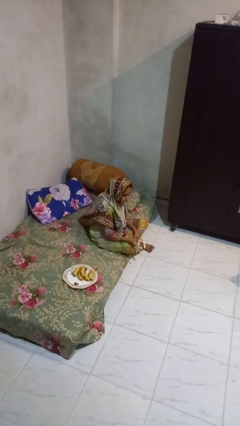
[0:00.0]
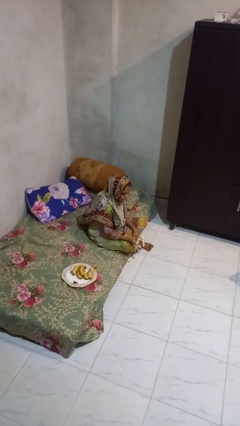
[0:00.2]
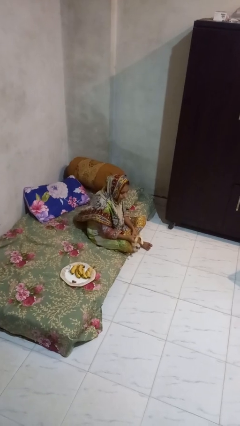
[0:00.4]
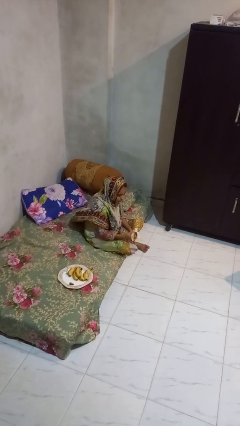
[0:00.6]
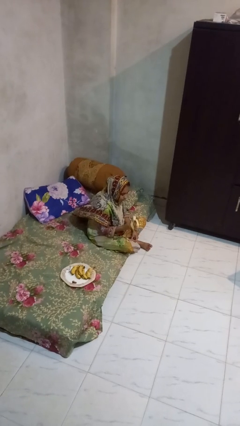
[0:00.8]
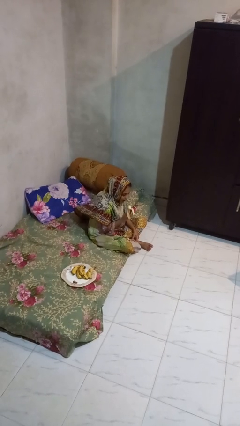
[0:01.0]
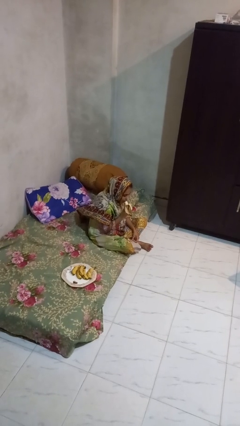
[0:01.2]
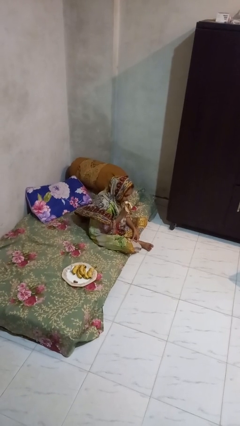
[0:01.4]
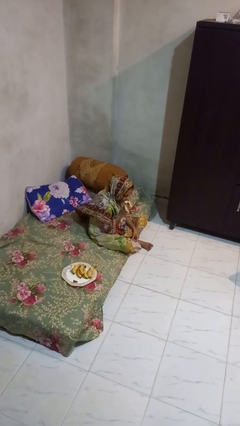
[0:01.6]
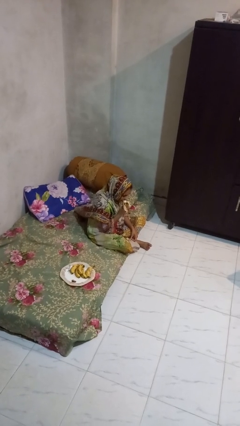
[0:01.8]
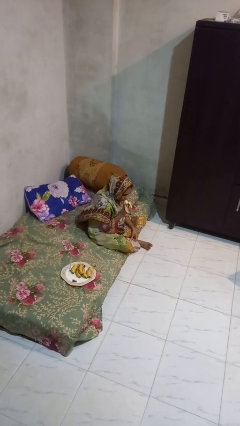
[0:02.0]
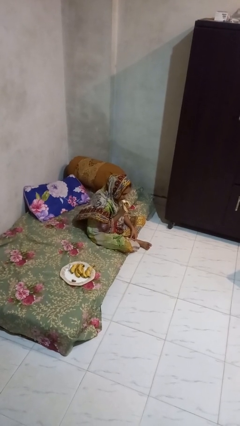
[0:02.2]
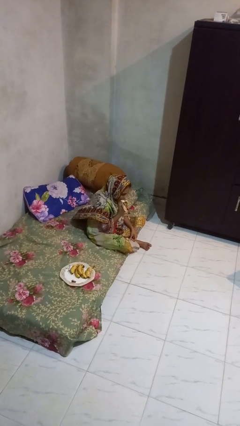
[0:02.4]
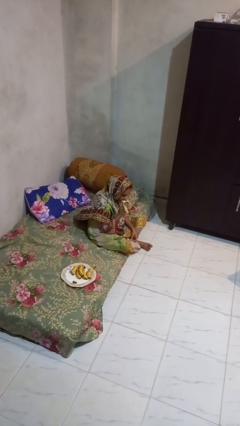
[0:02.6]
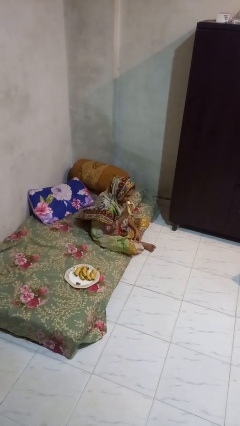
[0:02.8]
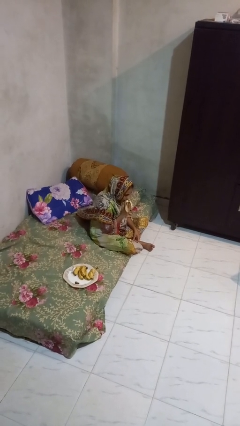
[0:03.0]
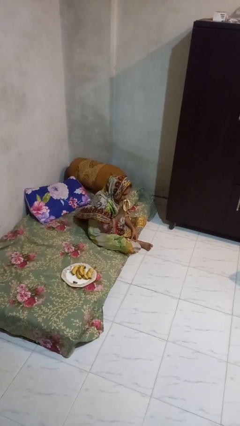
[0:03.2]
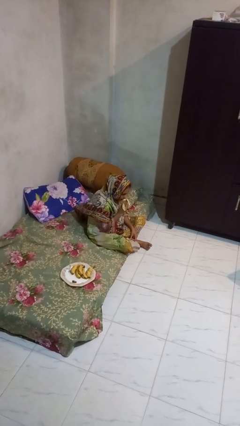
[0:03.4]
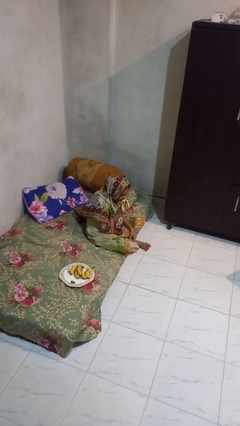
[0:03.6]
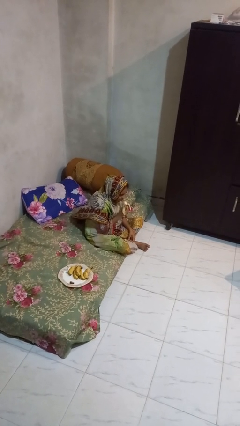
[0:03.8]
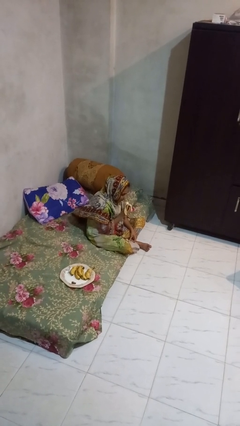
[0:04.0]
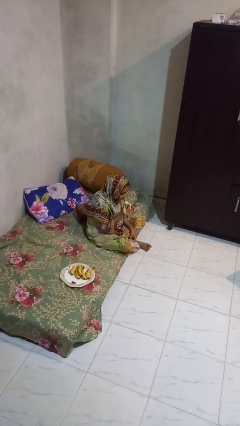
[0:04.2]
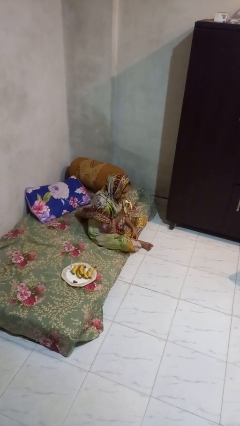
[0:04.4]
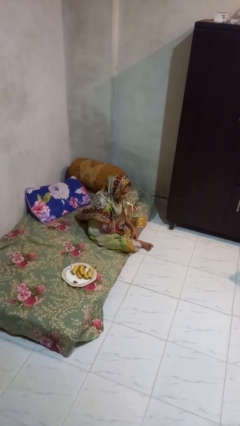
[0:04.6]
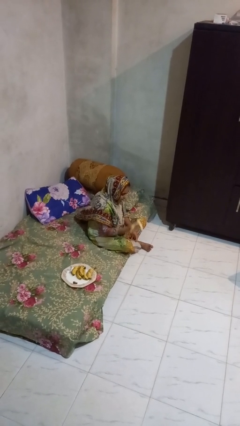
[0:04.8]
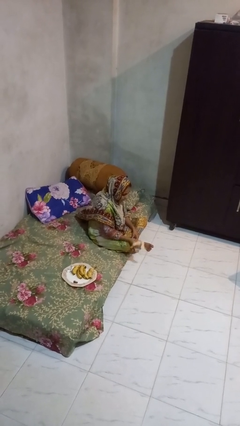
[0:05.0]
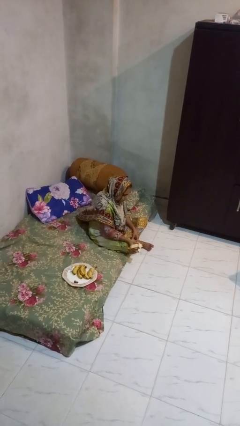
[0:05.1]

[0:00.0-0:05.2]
person eats banana

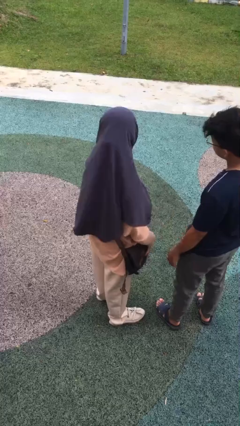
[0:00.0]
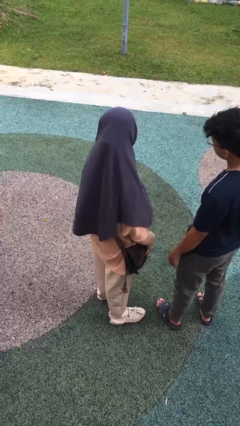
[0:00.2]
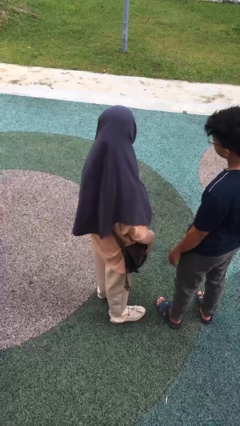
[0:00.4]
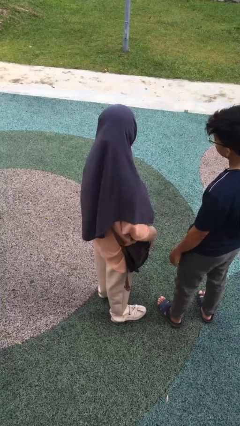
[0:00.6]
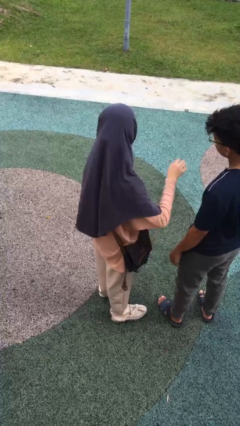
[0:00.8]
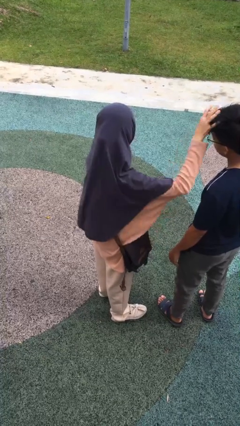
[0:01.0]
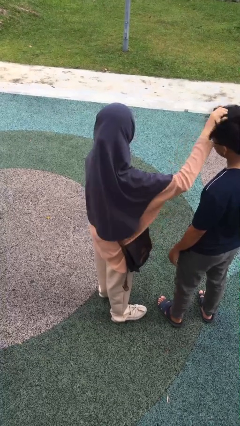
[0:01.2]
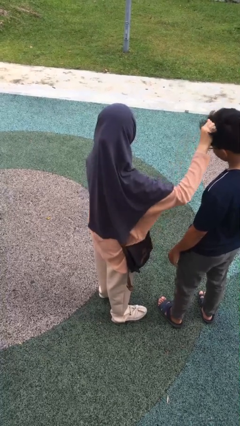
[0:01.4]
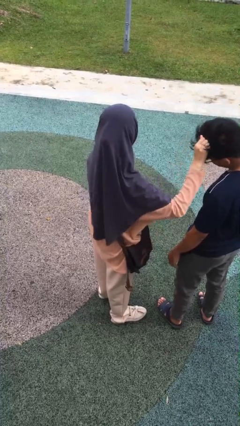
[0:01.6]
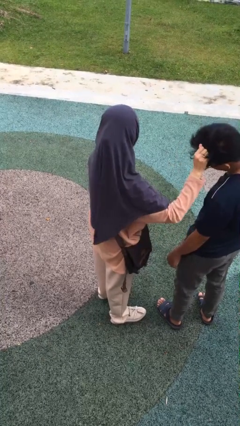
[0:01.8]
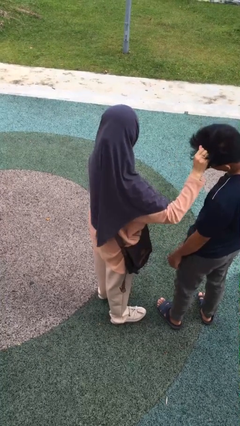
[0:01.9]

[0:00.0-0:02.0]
person grabs person by hair

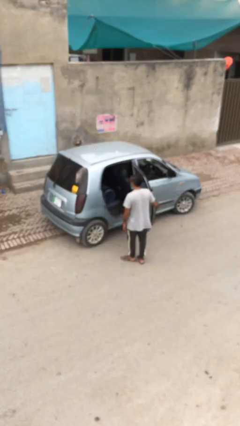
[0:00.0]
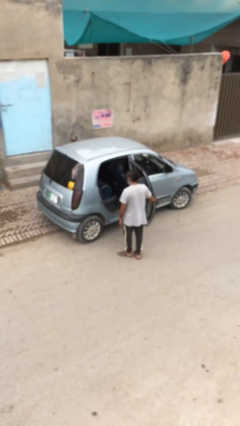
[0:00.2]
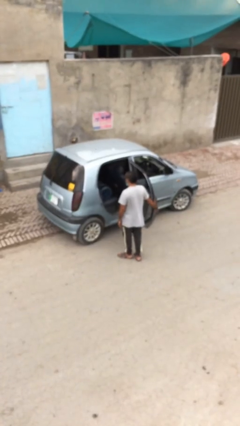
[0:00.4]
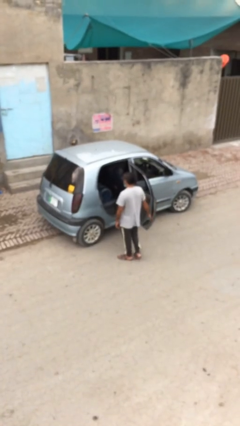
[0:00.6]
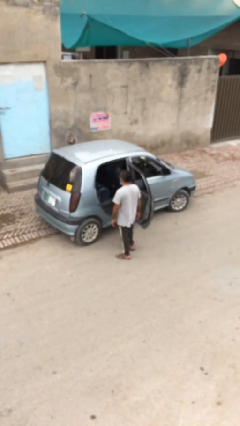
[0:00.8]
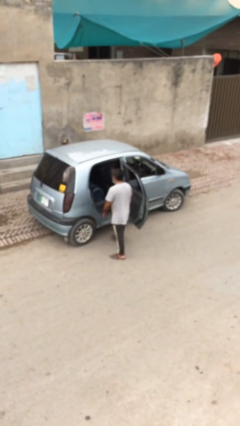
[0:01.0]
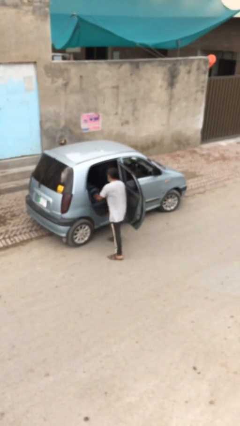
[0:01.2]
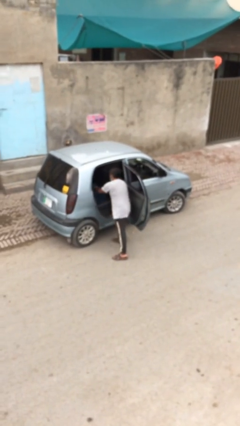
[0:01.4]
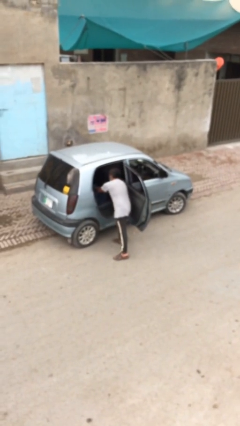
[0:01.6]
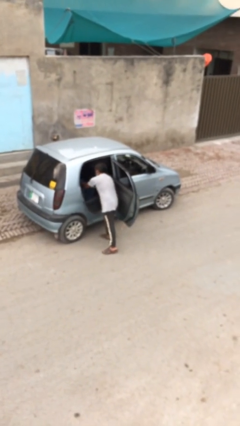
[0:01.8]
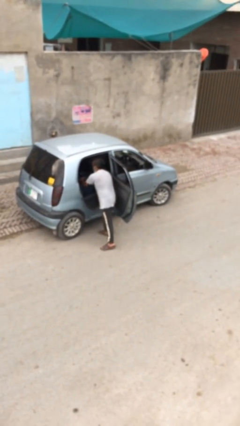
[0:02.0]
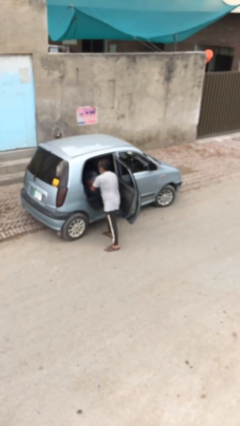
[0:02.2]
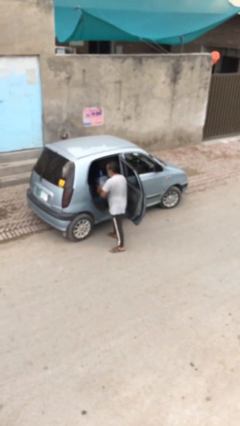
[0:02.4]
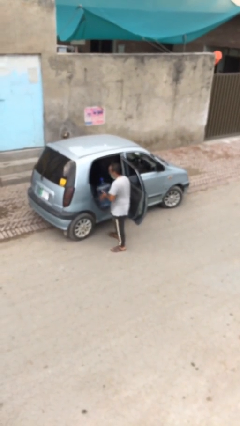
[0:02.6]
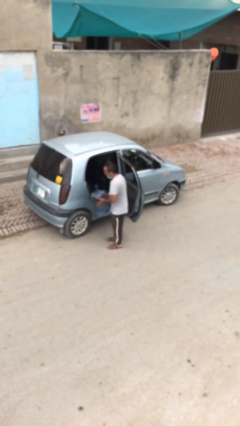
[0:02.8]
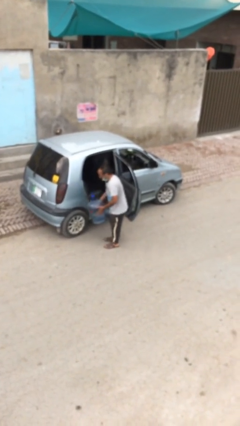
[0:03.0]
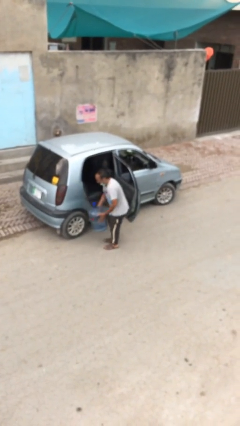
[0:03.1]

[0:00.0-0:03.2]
person unloads car

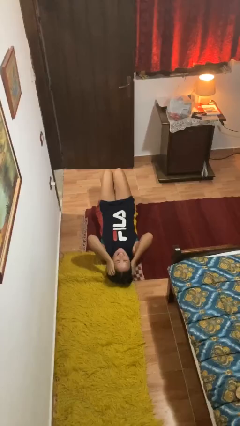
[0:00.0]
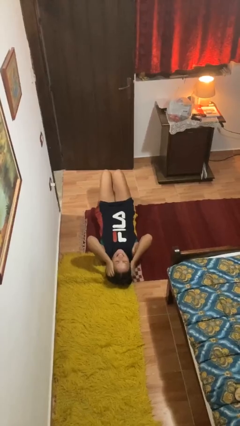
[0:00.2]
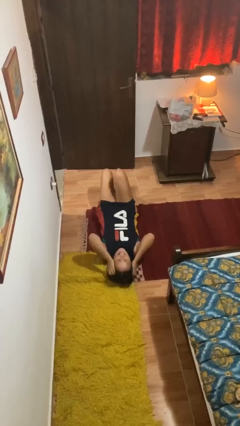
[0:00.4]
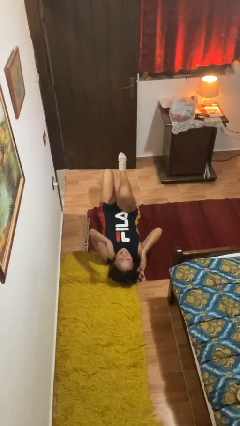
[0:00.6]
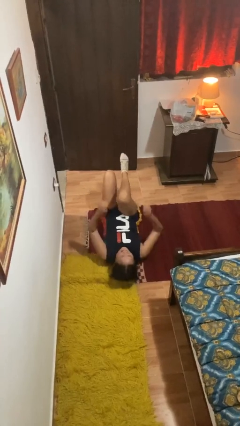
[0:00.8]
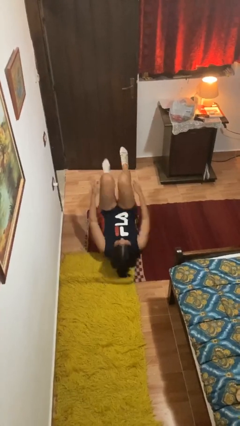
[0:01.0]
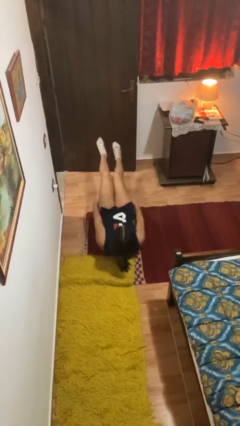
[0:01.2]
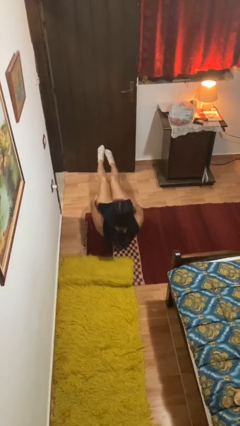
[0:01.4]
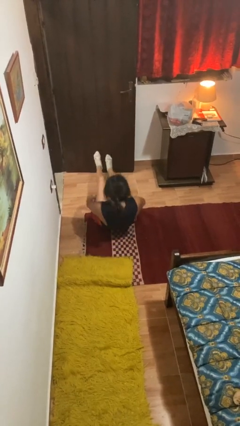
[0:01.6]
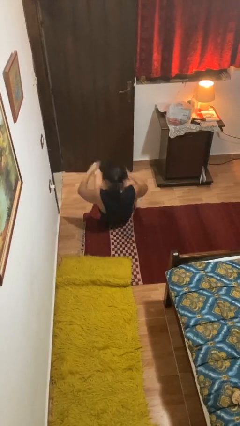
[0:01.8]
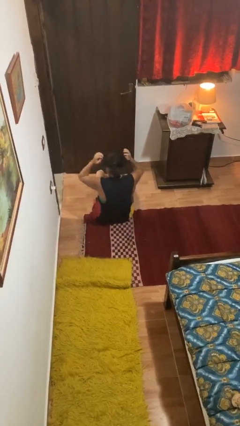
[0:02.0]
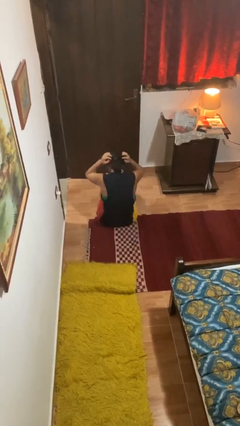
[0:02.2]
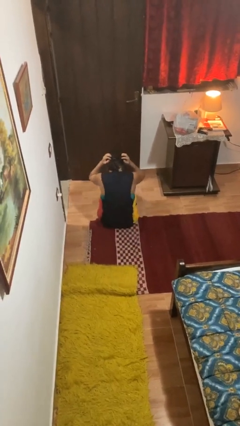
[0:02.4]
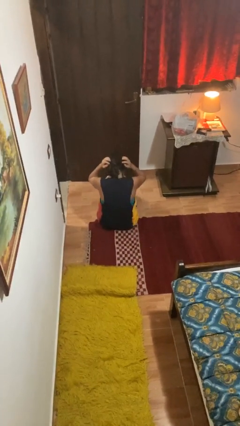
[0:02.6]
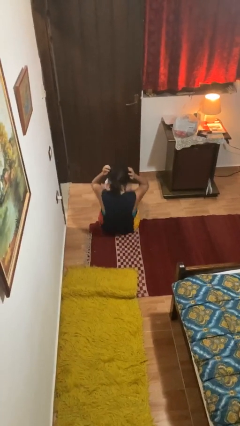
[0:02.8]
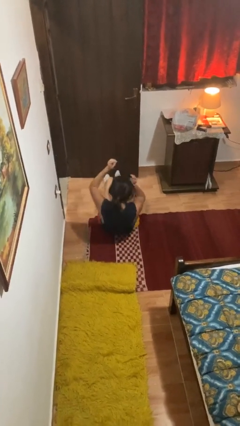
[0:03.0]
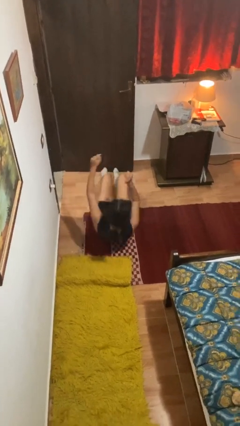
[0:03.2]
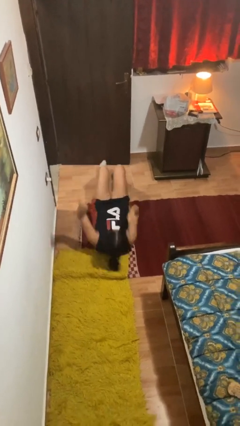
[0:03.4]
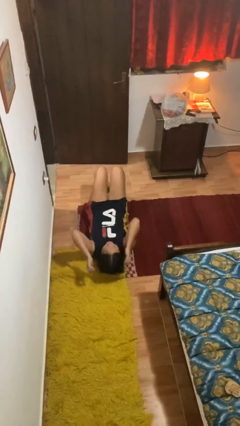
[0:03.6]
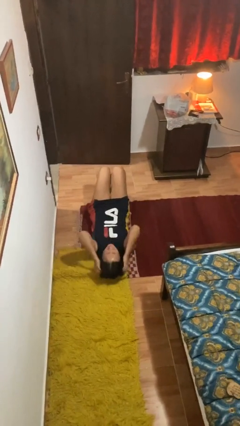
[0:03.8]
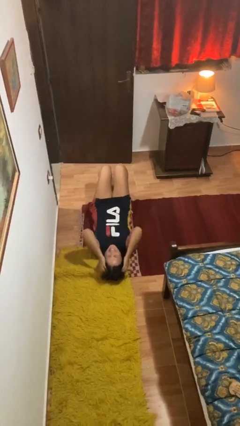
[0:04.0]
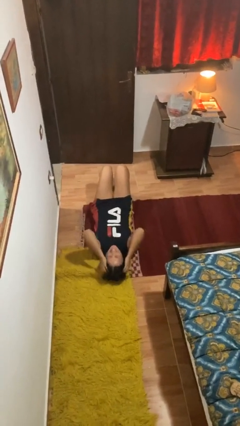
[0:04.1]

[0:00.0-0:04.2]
person exercises with situp

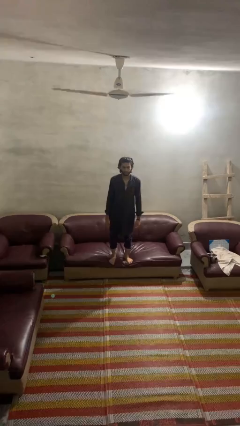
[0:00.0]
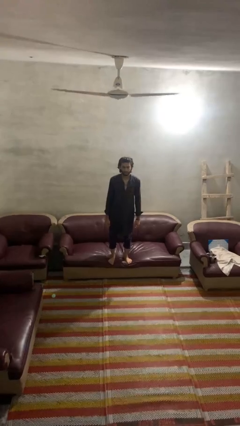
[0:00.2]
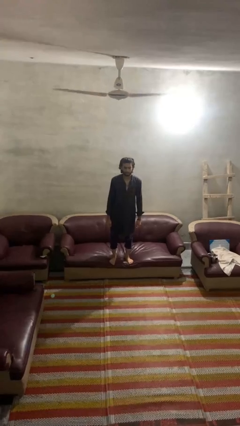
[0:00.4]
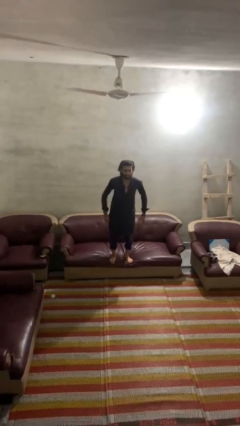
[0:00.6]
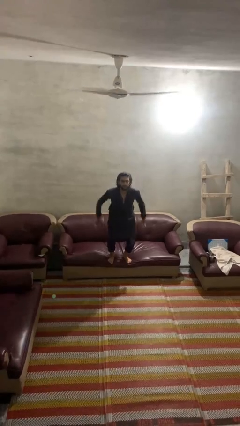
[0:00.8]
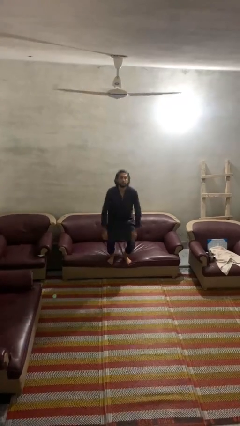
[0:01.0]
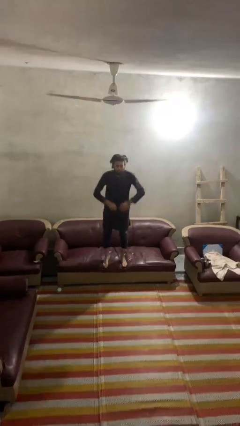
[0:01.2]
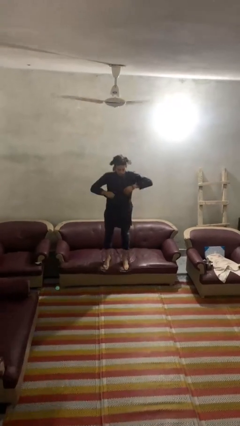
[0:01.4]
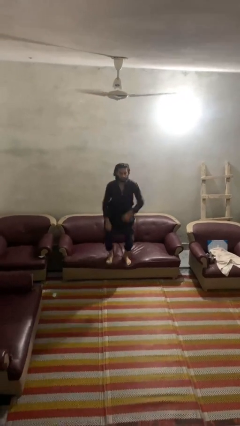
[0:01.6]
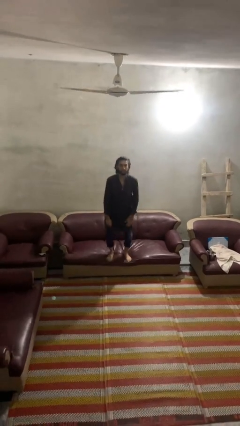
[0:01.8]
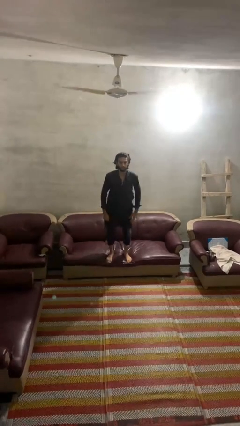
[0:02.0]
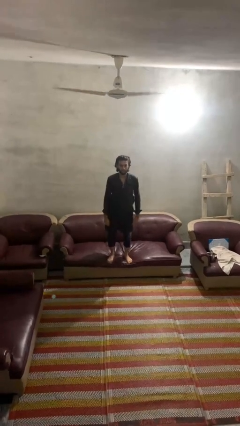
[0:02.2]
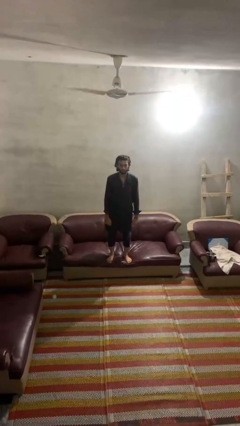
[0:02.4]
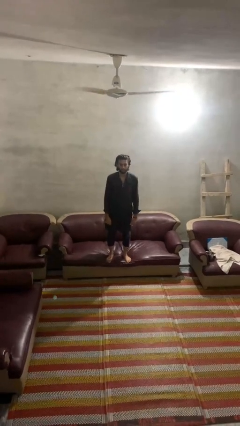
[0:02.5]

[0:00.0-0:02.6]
person jumps on couch

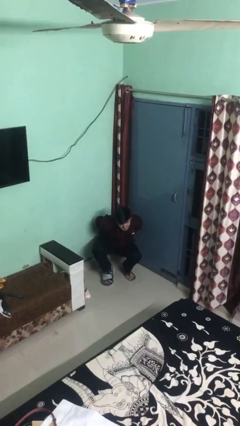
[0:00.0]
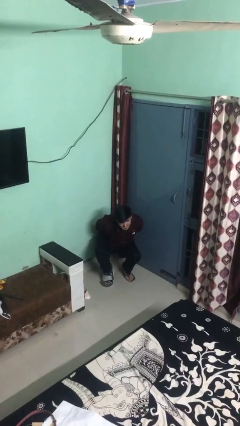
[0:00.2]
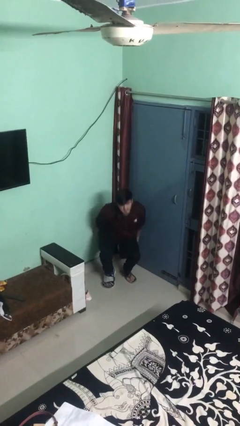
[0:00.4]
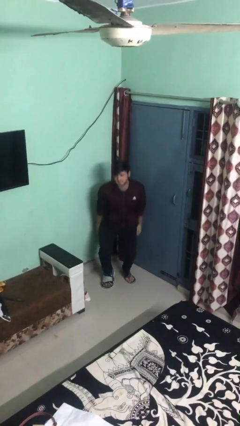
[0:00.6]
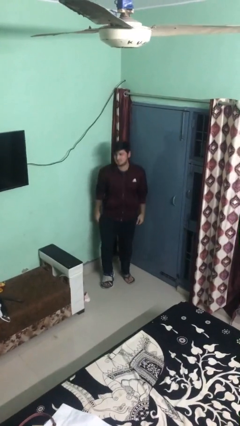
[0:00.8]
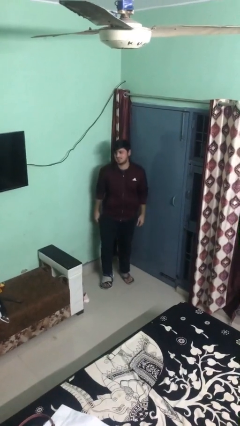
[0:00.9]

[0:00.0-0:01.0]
person stands up
